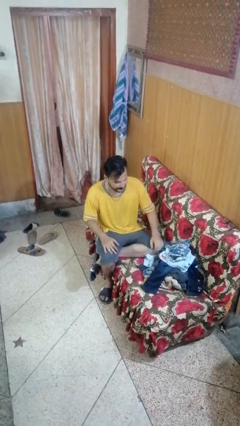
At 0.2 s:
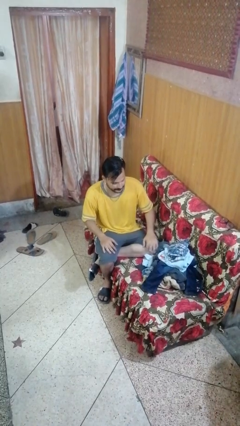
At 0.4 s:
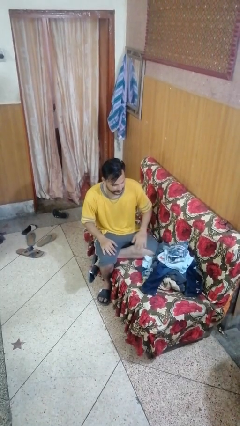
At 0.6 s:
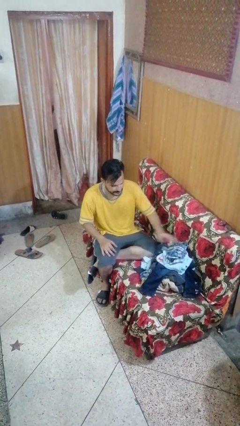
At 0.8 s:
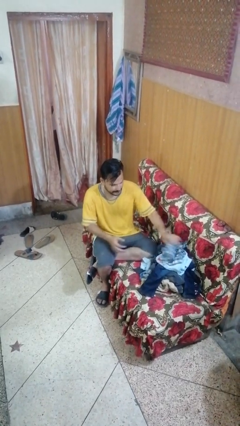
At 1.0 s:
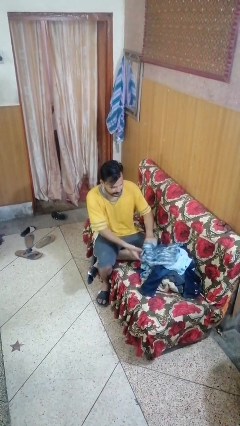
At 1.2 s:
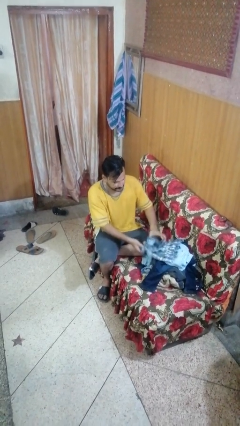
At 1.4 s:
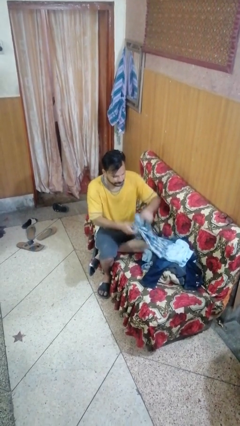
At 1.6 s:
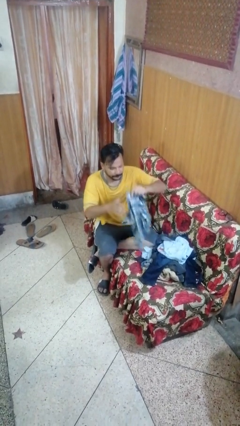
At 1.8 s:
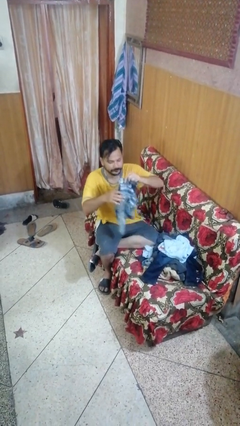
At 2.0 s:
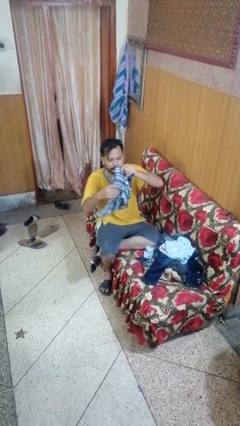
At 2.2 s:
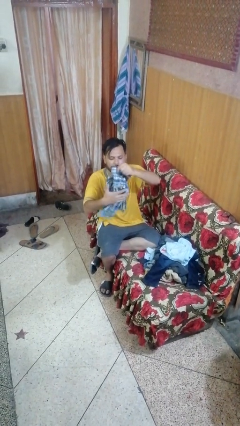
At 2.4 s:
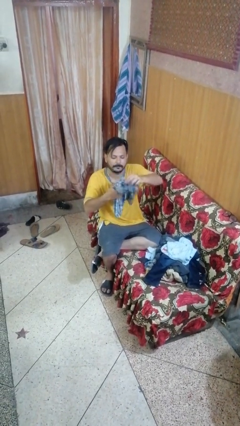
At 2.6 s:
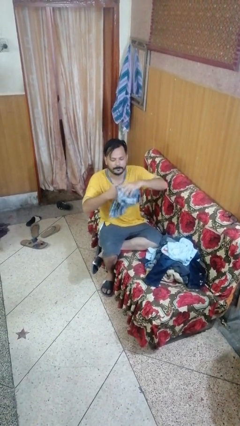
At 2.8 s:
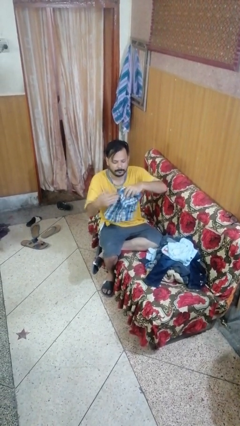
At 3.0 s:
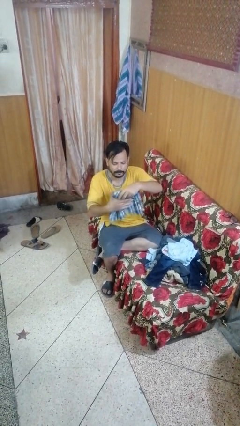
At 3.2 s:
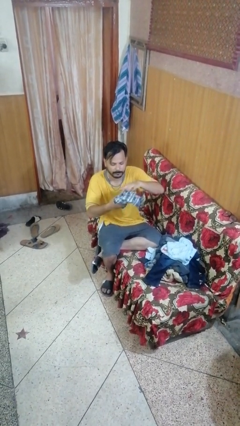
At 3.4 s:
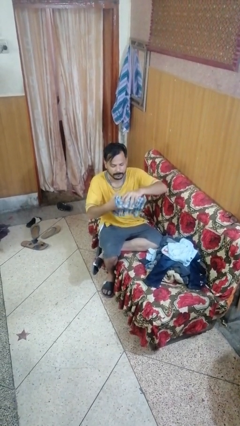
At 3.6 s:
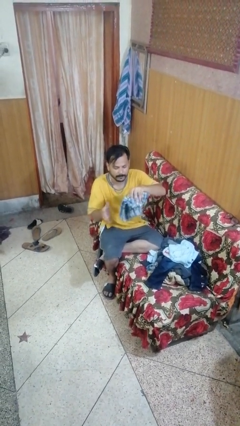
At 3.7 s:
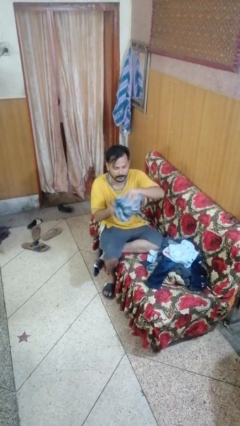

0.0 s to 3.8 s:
person folds shirt

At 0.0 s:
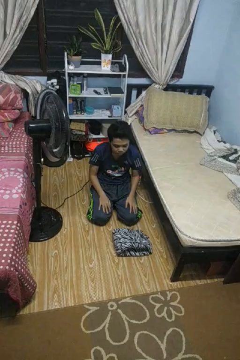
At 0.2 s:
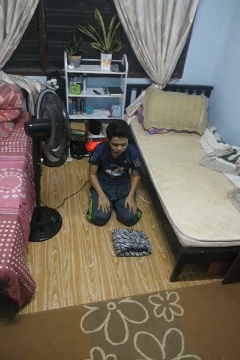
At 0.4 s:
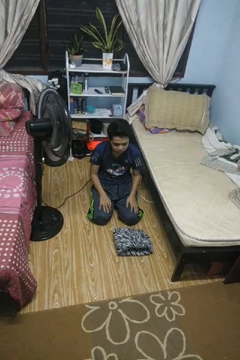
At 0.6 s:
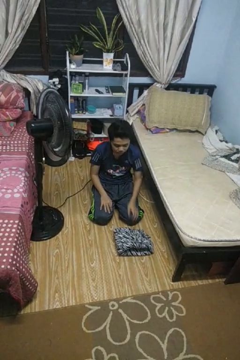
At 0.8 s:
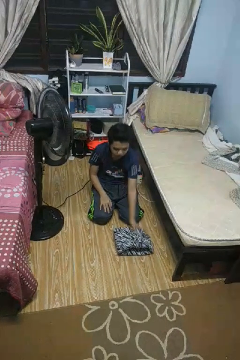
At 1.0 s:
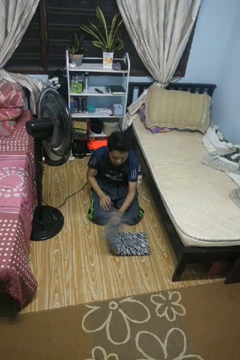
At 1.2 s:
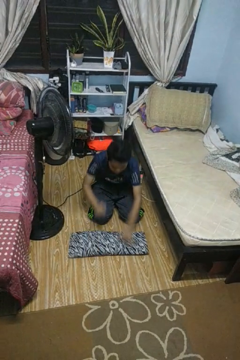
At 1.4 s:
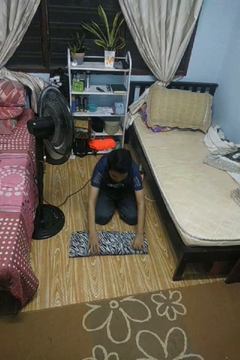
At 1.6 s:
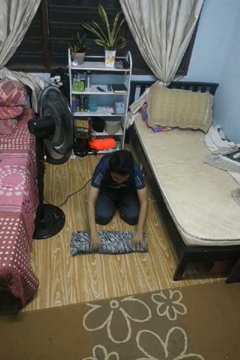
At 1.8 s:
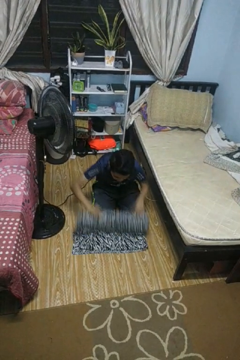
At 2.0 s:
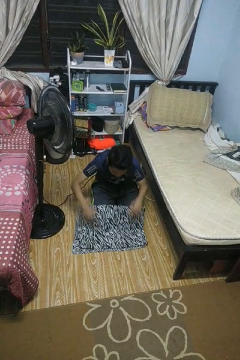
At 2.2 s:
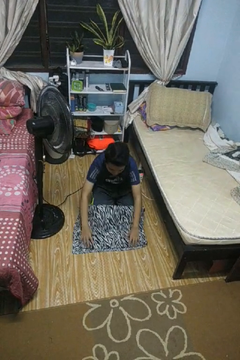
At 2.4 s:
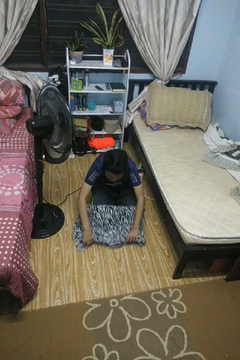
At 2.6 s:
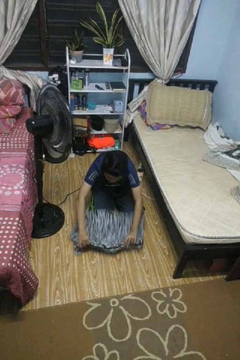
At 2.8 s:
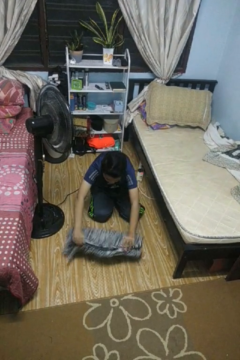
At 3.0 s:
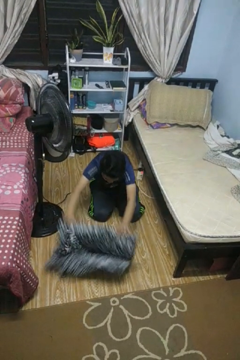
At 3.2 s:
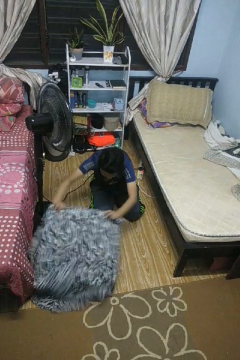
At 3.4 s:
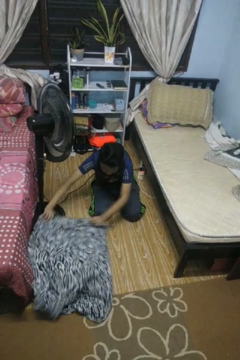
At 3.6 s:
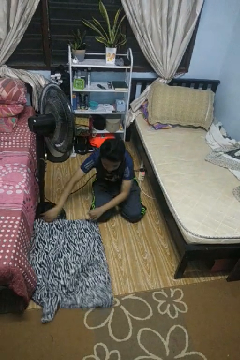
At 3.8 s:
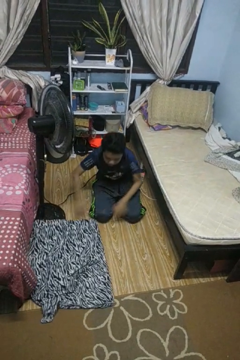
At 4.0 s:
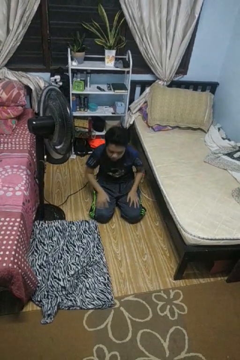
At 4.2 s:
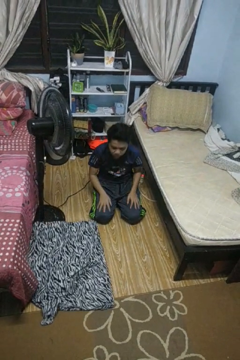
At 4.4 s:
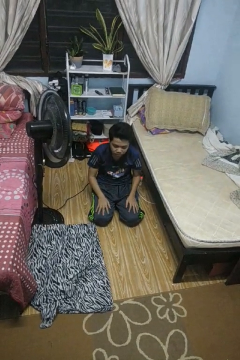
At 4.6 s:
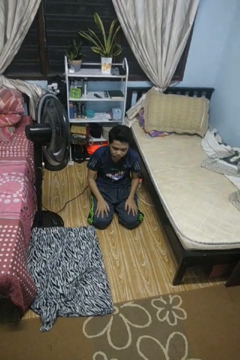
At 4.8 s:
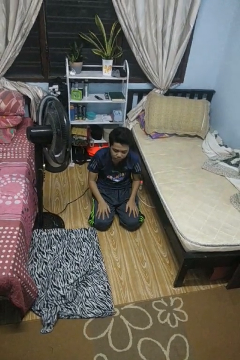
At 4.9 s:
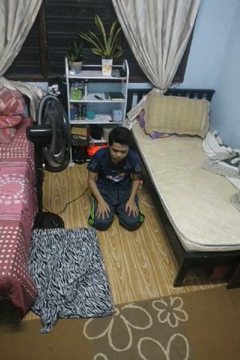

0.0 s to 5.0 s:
person unfolds blanket

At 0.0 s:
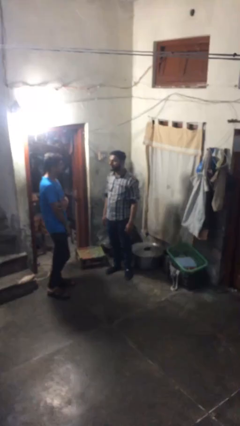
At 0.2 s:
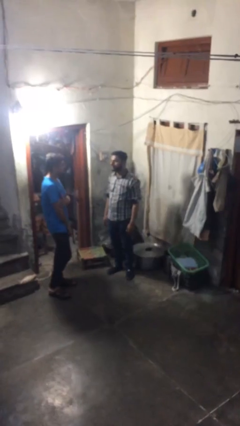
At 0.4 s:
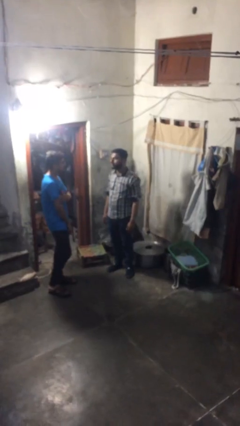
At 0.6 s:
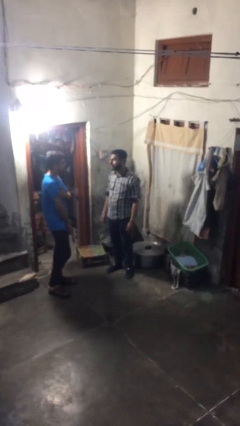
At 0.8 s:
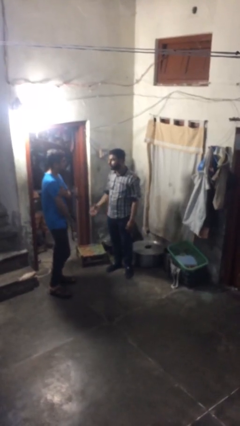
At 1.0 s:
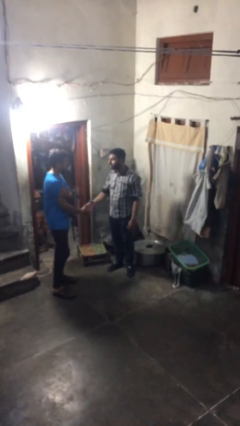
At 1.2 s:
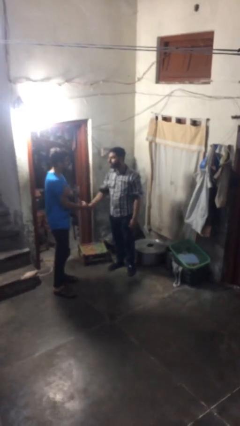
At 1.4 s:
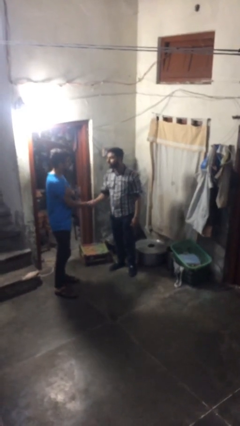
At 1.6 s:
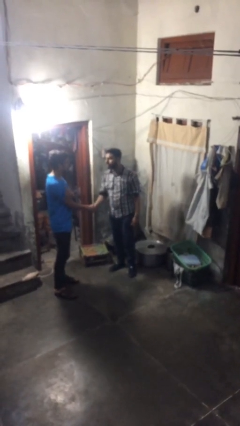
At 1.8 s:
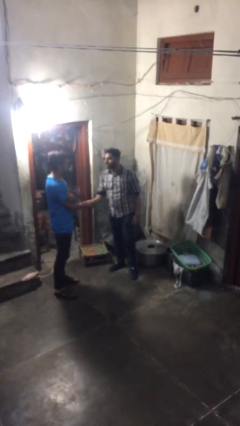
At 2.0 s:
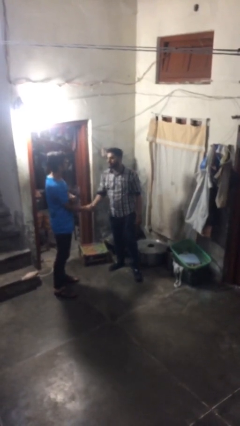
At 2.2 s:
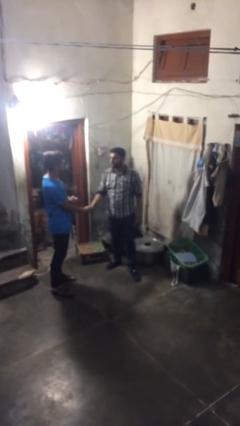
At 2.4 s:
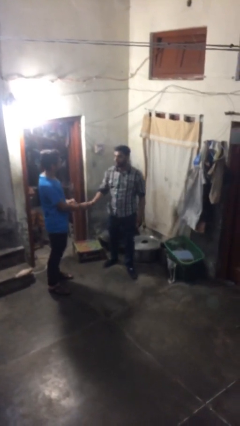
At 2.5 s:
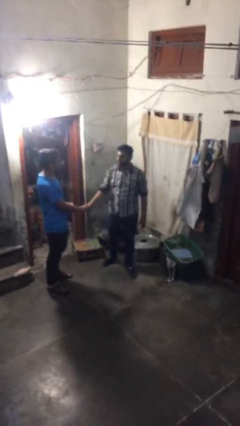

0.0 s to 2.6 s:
person shakes hand

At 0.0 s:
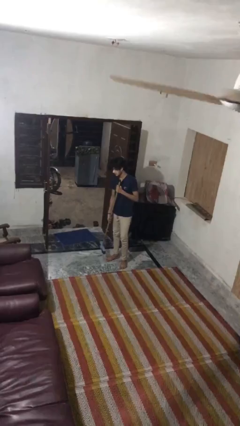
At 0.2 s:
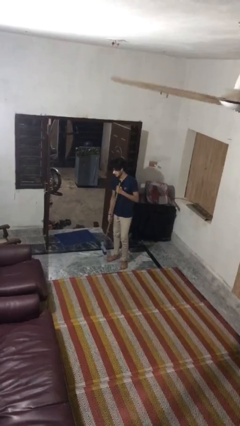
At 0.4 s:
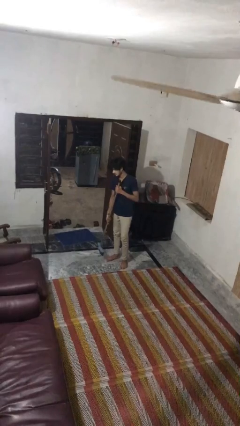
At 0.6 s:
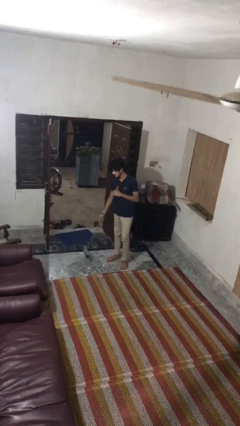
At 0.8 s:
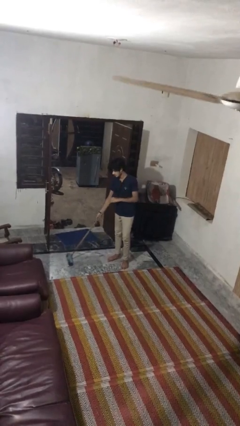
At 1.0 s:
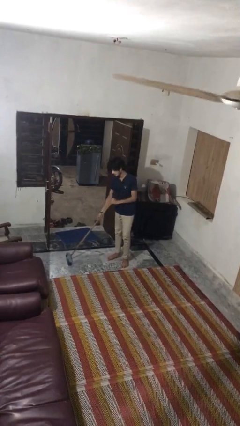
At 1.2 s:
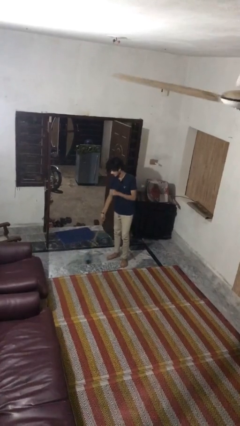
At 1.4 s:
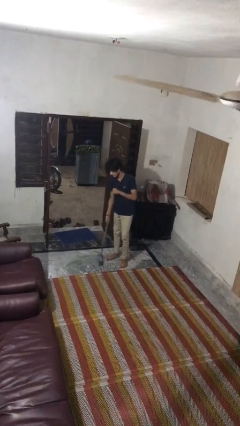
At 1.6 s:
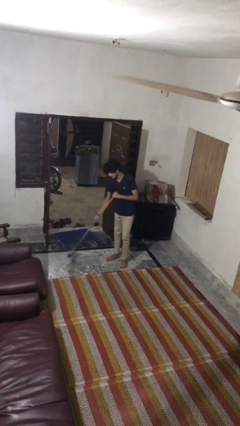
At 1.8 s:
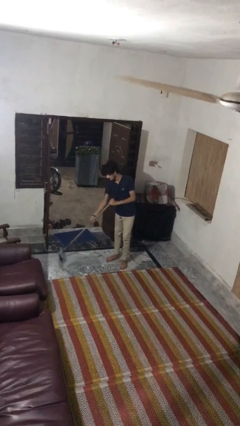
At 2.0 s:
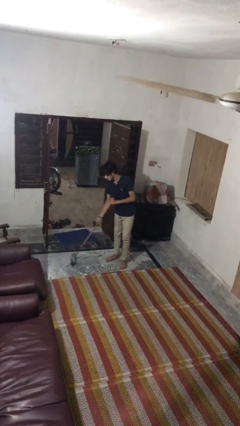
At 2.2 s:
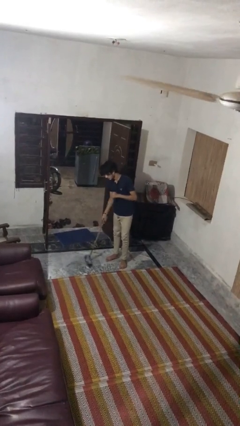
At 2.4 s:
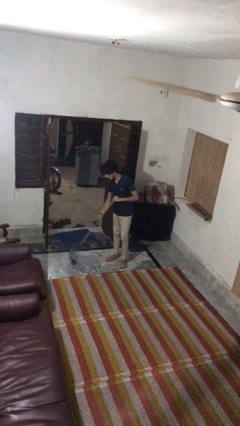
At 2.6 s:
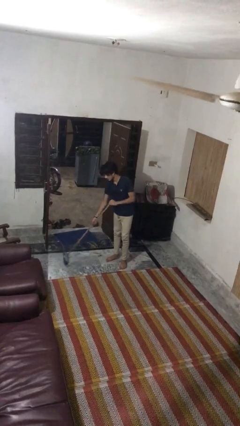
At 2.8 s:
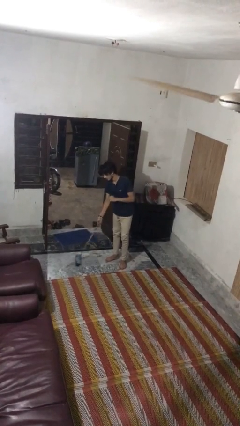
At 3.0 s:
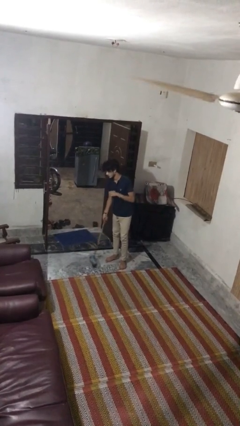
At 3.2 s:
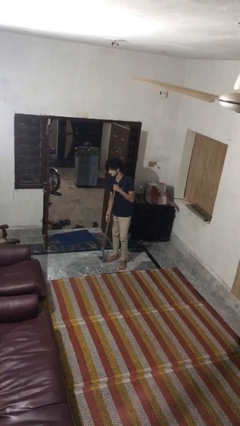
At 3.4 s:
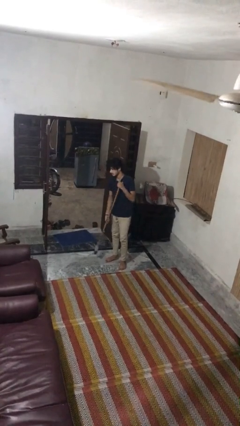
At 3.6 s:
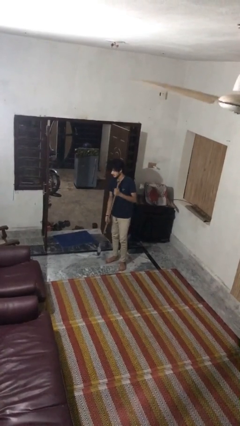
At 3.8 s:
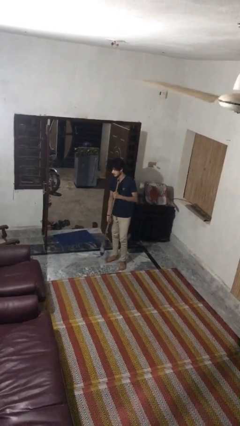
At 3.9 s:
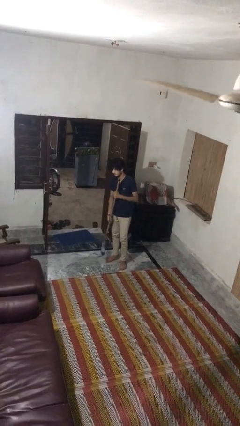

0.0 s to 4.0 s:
person sweeps floor

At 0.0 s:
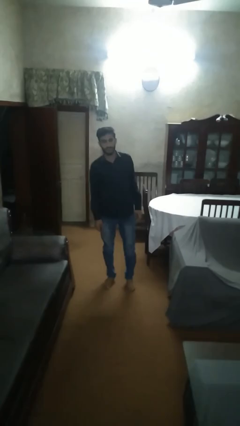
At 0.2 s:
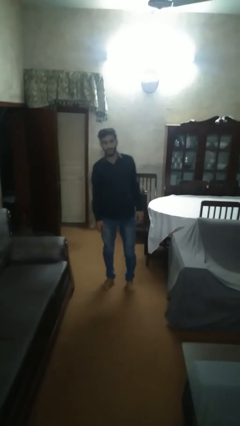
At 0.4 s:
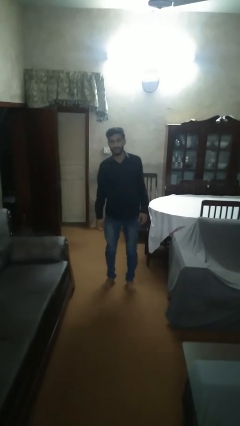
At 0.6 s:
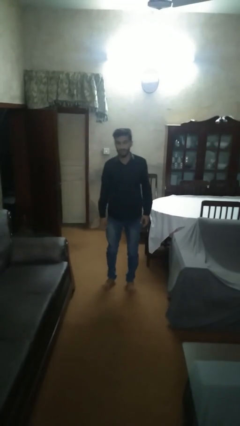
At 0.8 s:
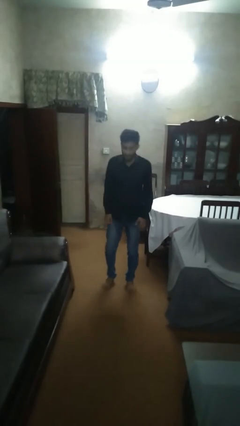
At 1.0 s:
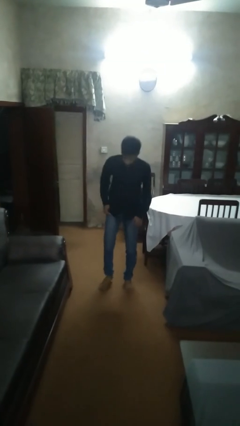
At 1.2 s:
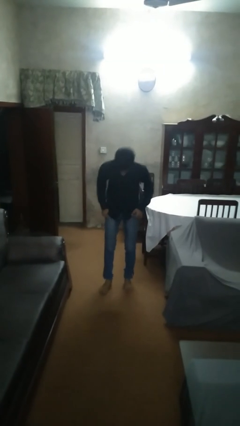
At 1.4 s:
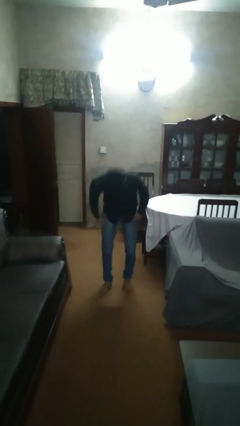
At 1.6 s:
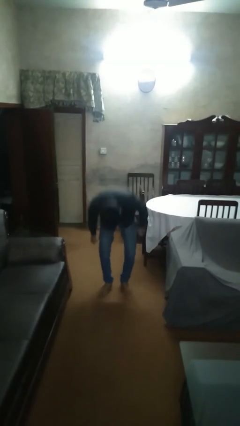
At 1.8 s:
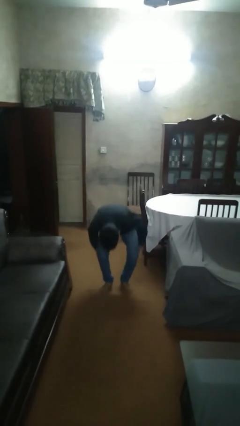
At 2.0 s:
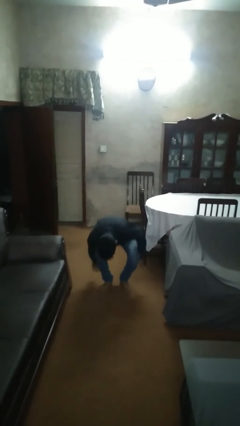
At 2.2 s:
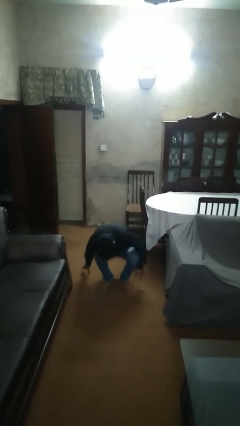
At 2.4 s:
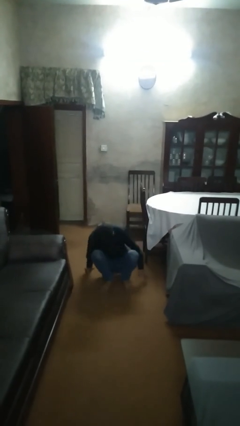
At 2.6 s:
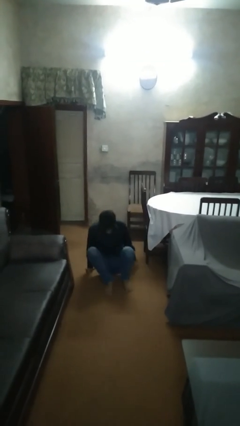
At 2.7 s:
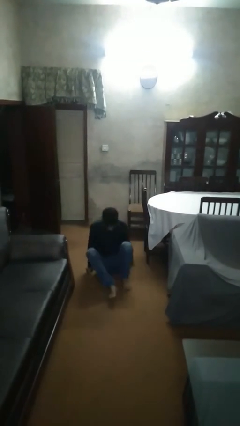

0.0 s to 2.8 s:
person sits crisscross

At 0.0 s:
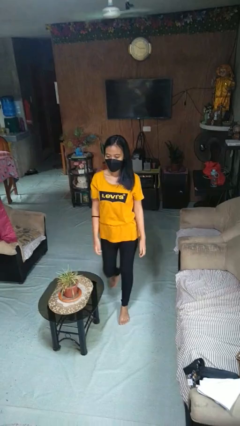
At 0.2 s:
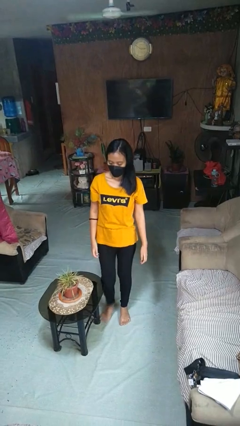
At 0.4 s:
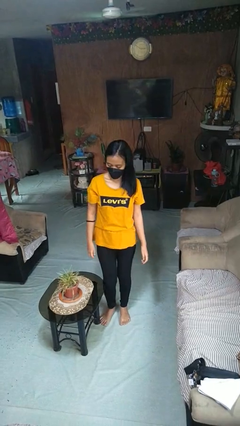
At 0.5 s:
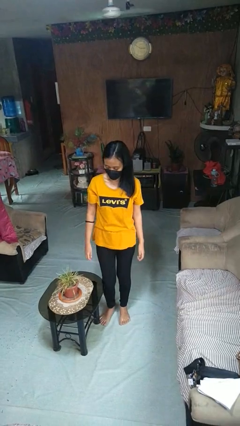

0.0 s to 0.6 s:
person bumps into table
